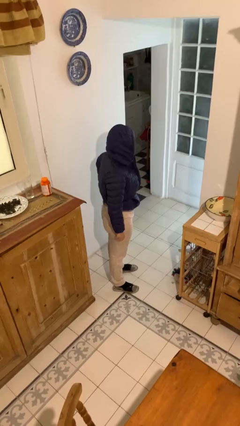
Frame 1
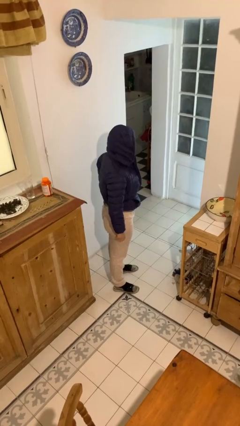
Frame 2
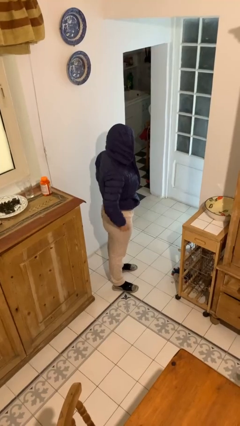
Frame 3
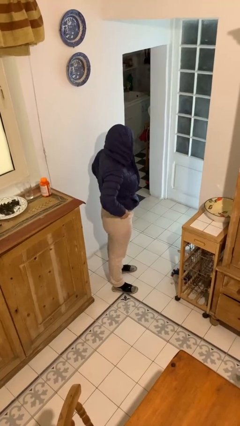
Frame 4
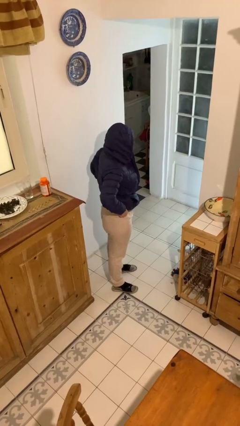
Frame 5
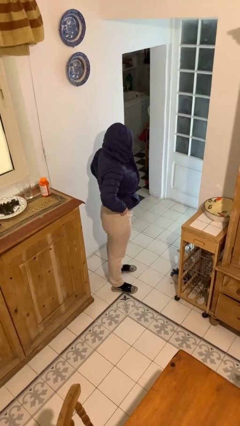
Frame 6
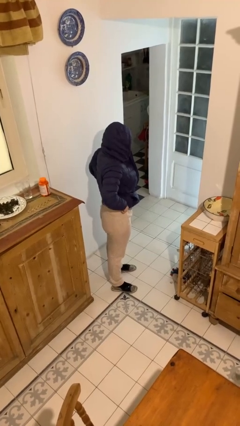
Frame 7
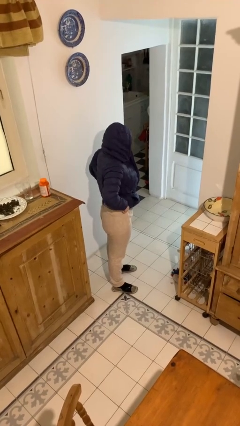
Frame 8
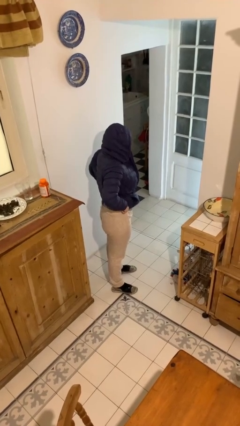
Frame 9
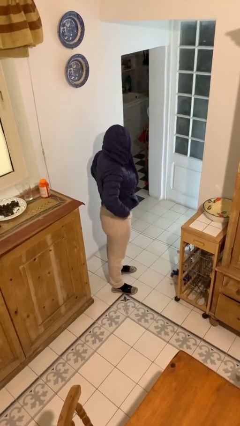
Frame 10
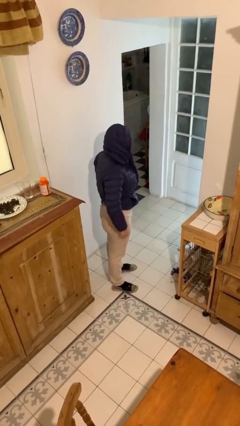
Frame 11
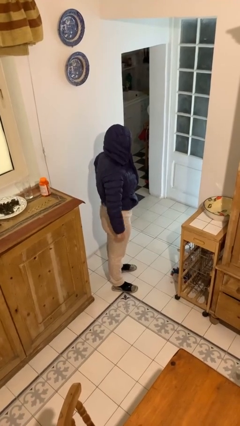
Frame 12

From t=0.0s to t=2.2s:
person hikes up pants

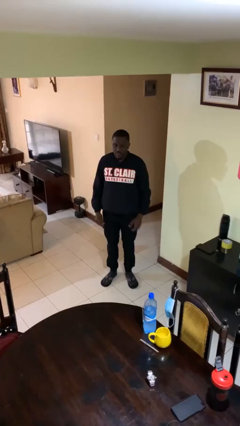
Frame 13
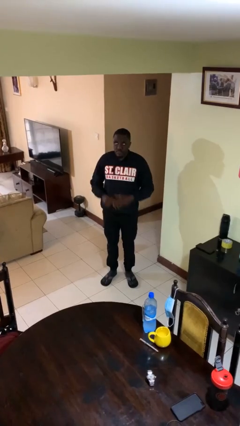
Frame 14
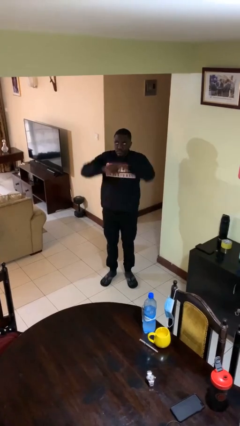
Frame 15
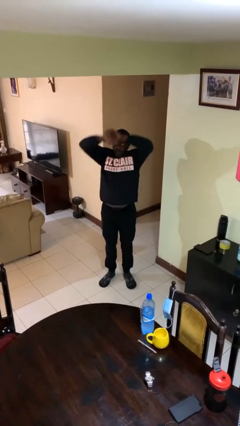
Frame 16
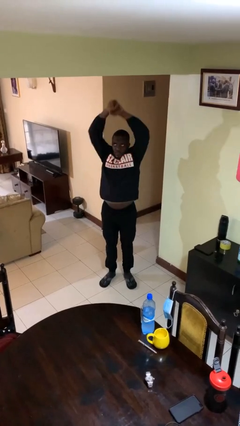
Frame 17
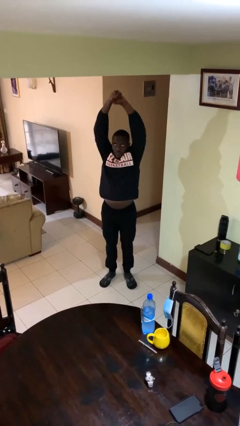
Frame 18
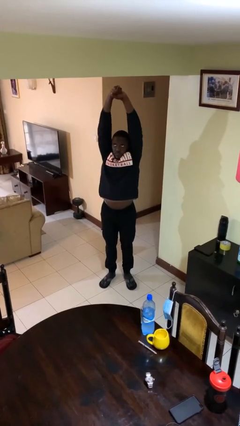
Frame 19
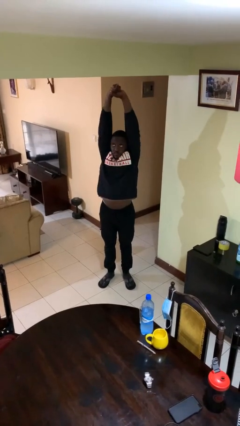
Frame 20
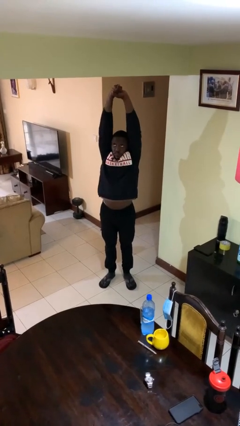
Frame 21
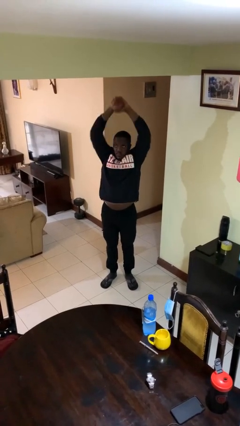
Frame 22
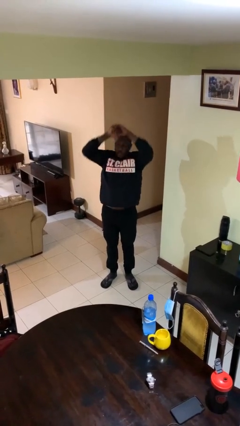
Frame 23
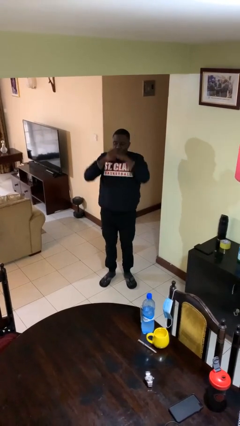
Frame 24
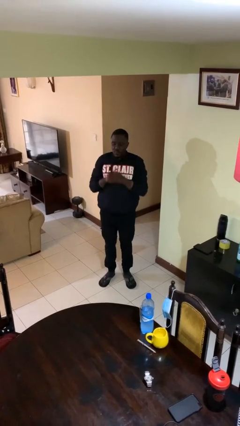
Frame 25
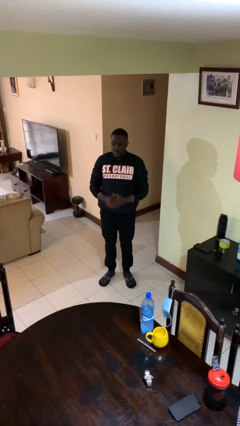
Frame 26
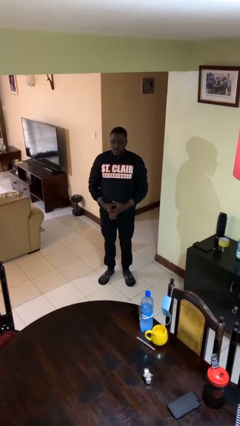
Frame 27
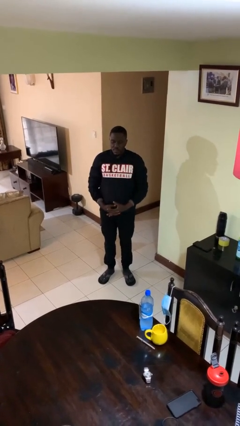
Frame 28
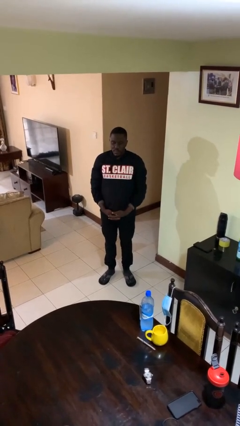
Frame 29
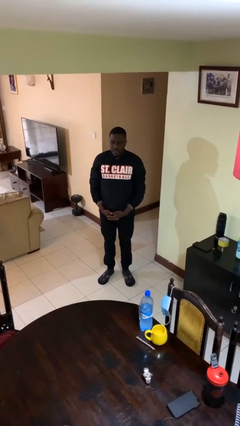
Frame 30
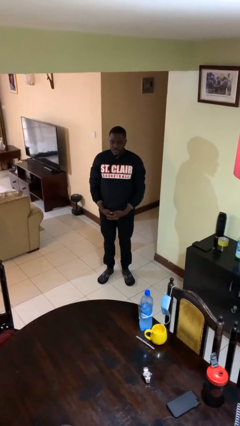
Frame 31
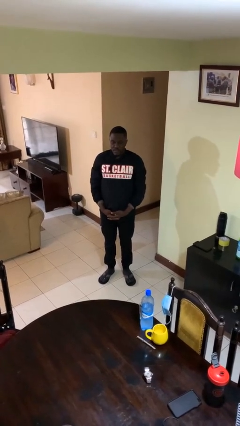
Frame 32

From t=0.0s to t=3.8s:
person stretches arms over head

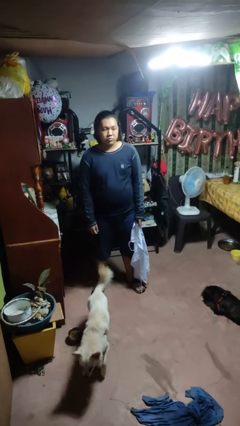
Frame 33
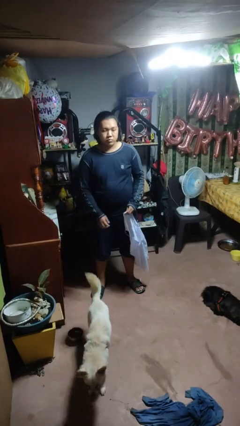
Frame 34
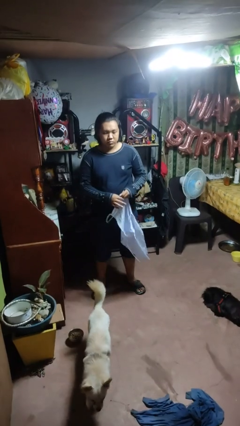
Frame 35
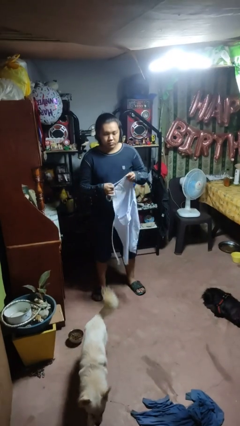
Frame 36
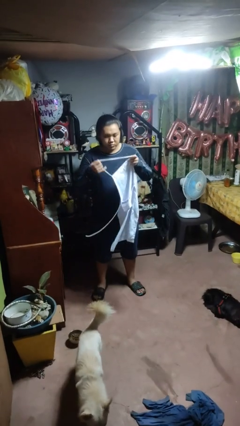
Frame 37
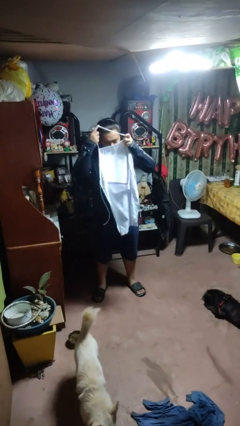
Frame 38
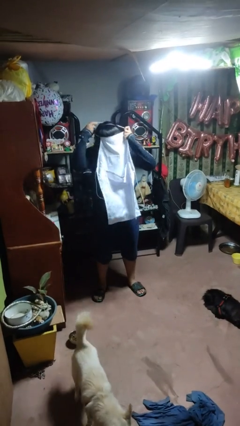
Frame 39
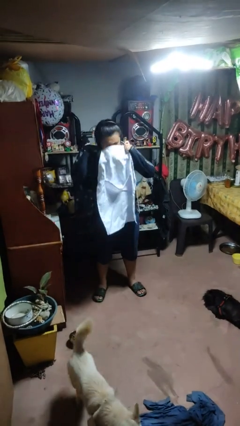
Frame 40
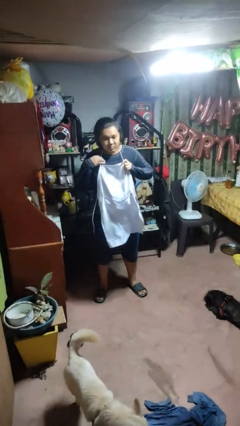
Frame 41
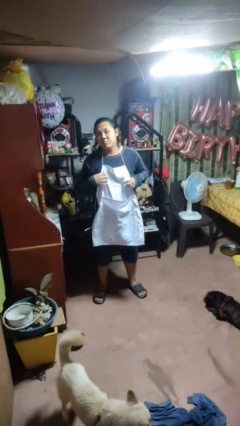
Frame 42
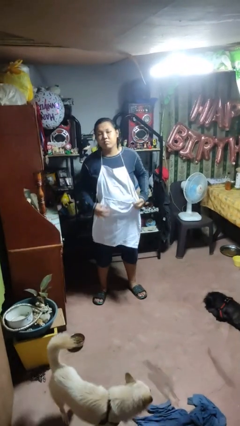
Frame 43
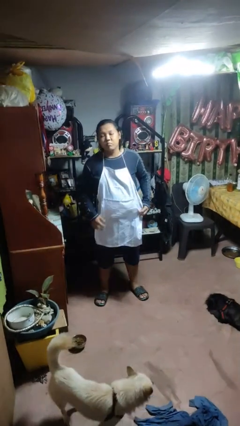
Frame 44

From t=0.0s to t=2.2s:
person puts on apron

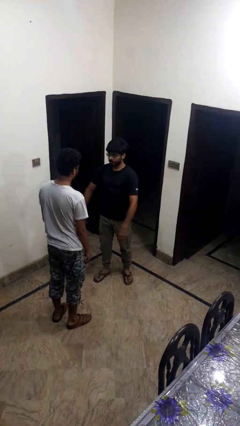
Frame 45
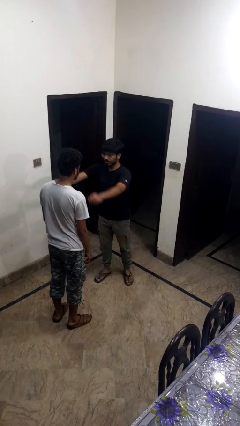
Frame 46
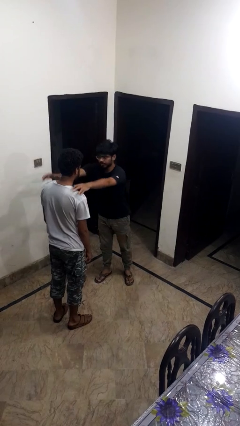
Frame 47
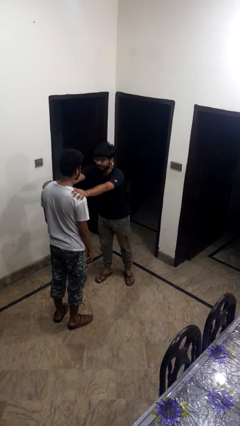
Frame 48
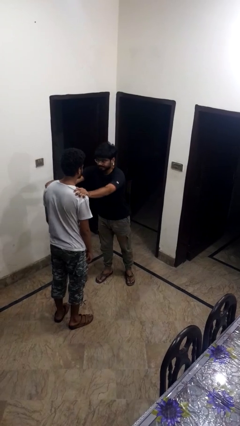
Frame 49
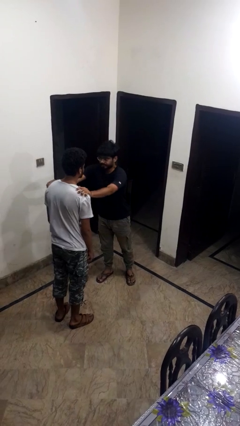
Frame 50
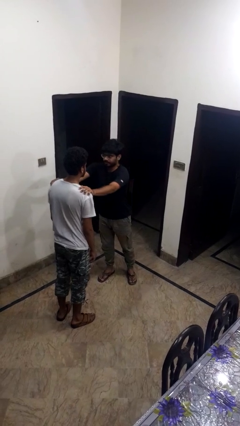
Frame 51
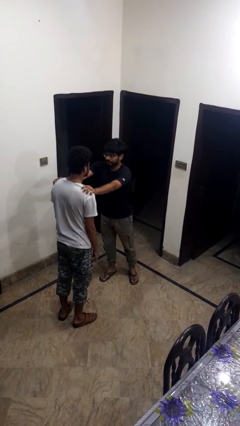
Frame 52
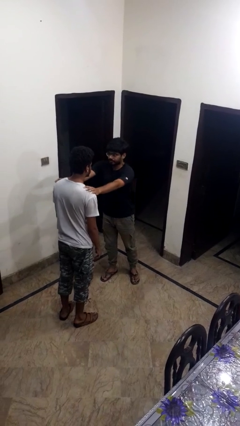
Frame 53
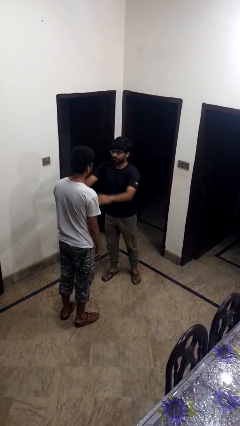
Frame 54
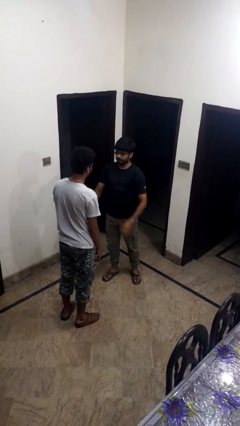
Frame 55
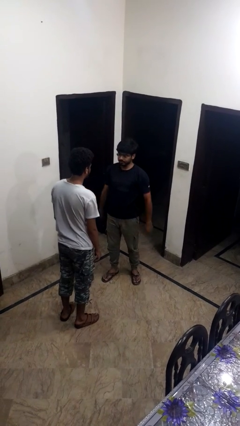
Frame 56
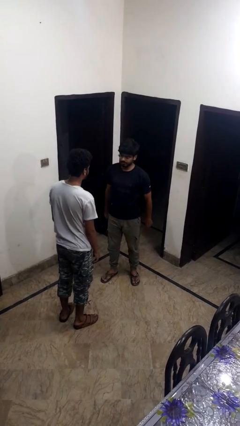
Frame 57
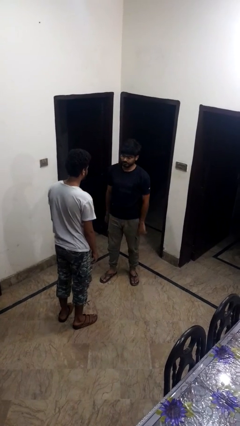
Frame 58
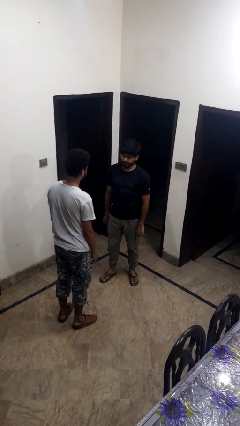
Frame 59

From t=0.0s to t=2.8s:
person kisses cheek of person

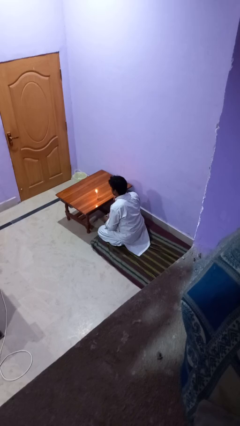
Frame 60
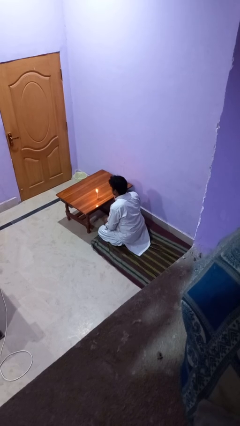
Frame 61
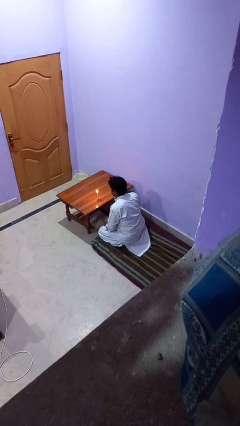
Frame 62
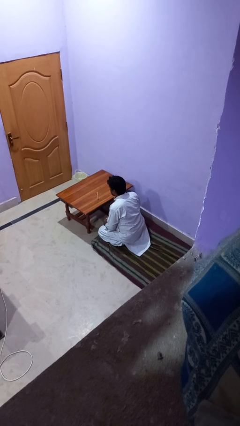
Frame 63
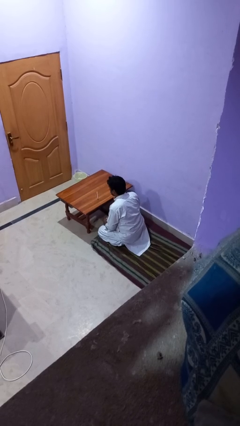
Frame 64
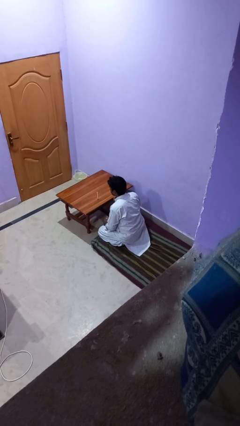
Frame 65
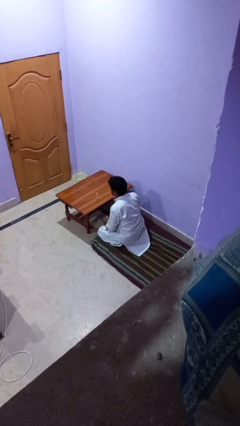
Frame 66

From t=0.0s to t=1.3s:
person extinguishes candle

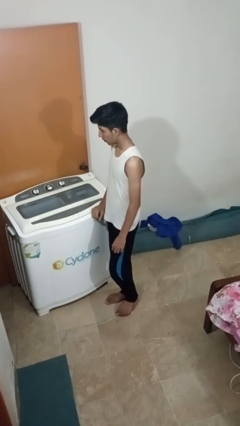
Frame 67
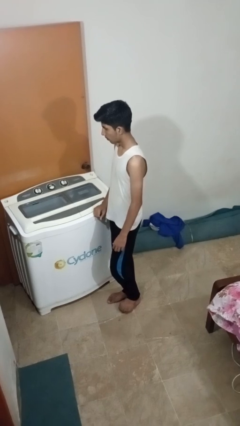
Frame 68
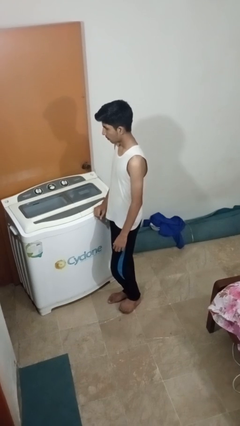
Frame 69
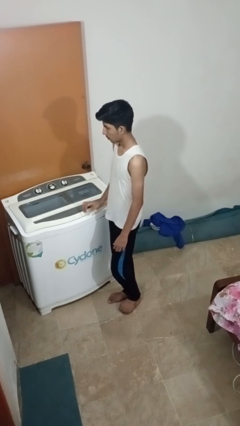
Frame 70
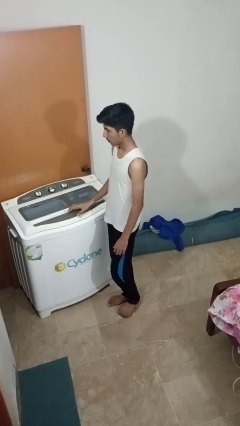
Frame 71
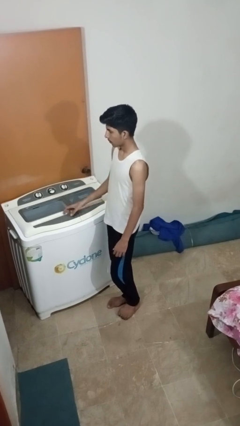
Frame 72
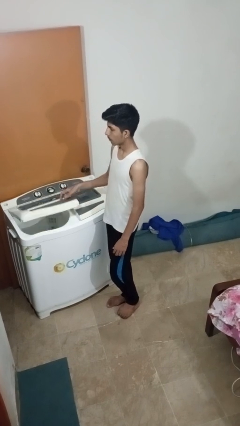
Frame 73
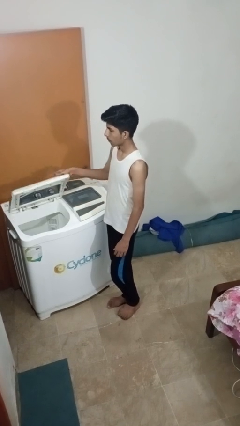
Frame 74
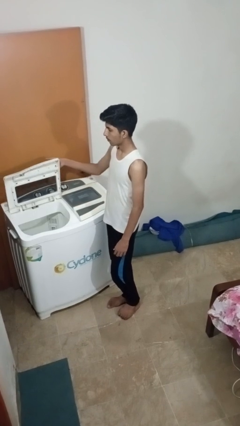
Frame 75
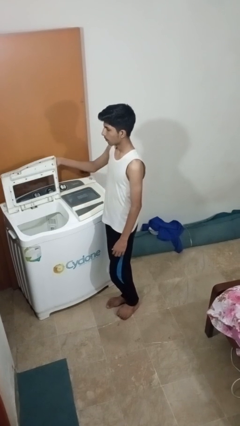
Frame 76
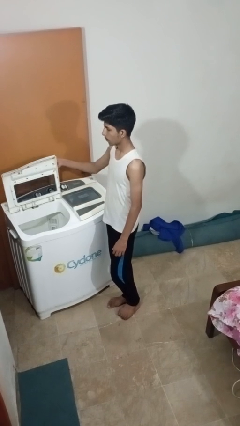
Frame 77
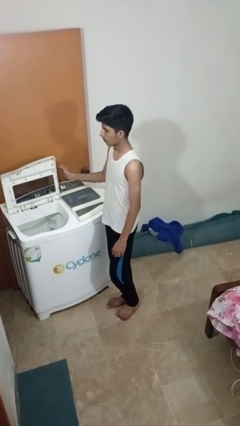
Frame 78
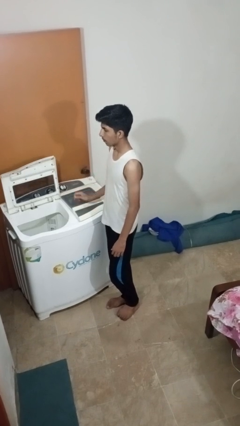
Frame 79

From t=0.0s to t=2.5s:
person opens clothes washer

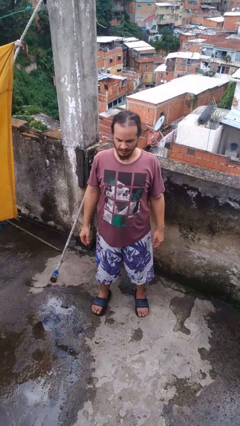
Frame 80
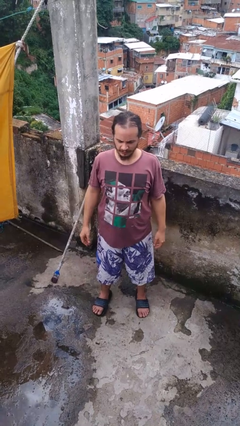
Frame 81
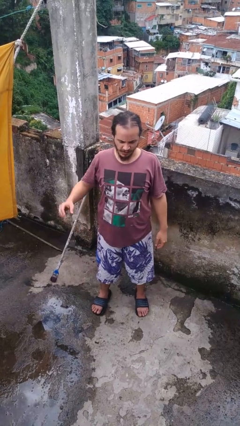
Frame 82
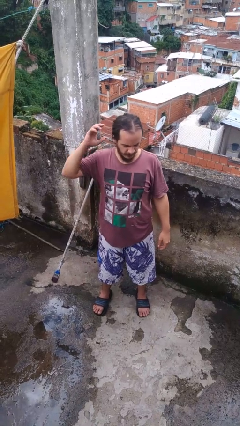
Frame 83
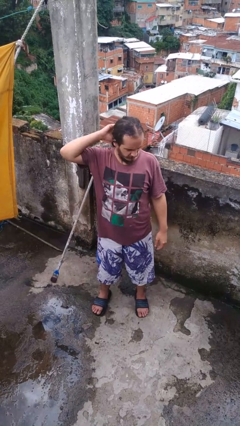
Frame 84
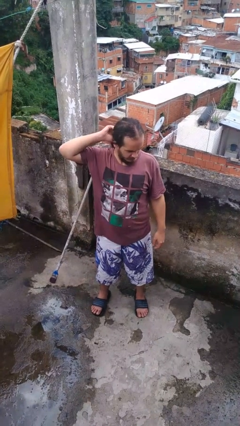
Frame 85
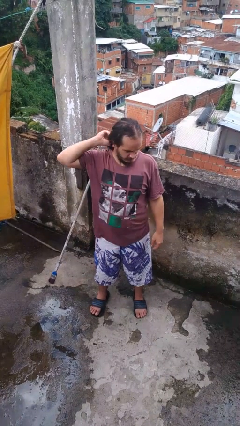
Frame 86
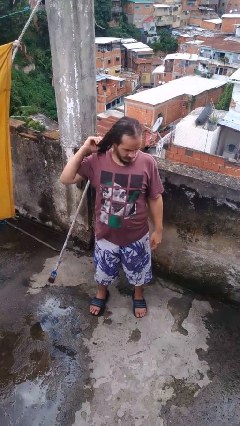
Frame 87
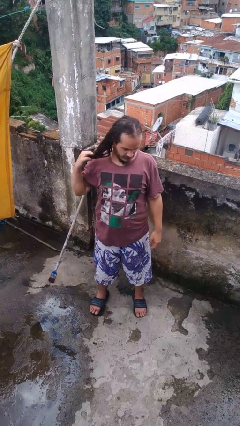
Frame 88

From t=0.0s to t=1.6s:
person takes off hairtie

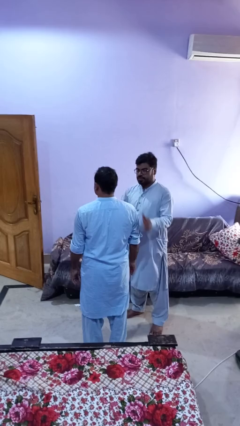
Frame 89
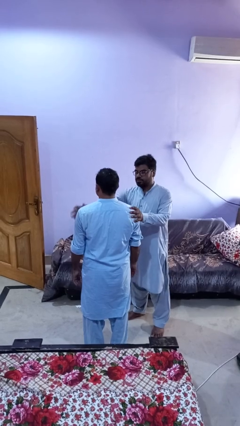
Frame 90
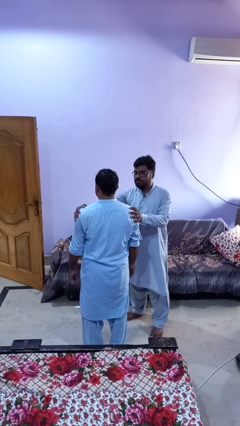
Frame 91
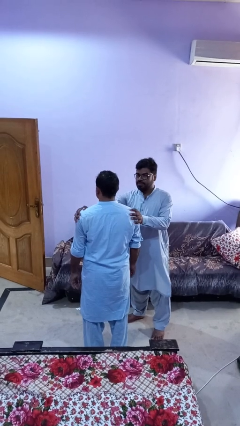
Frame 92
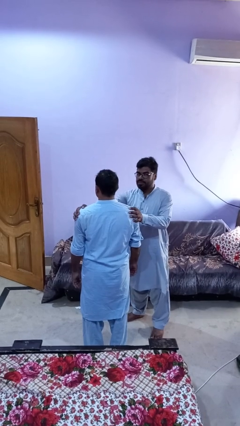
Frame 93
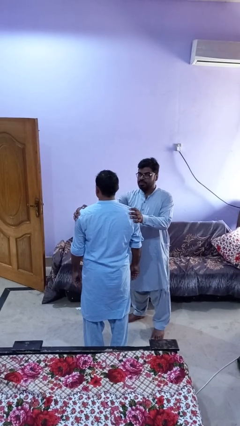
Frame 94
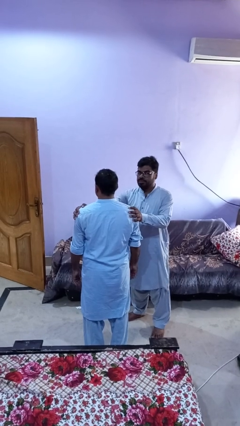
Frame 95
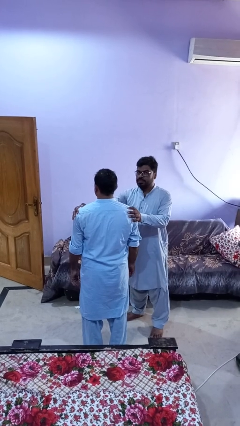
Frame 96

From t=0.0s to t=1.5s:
person grabs person by shoulder
